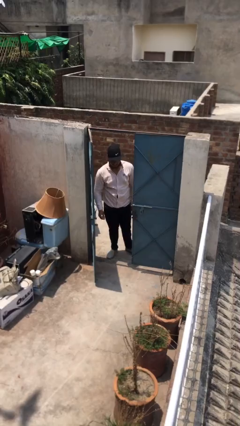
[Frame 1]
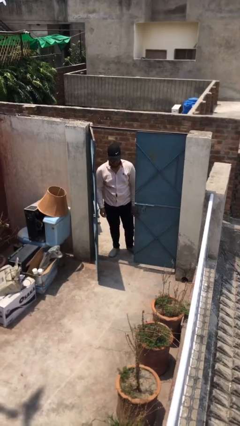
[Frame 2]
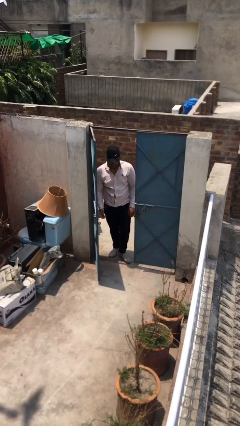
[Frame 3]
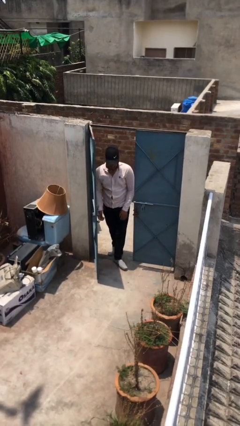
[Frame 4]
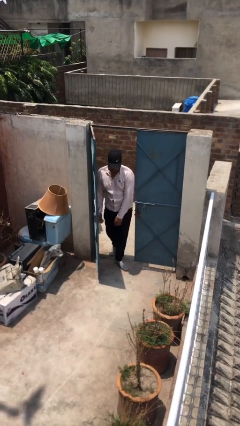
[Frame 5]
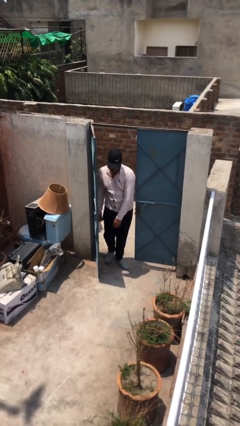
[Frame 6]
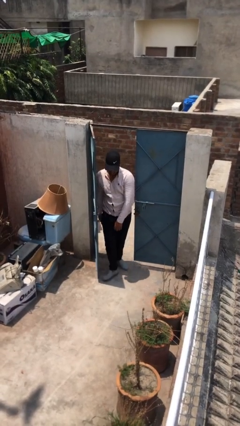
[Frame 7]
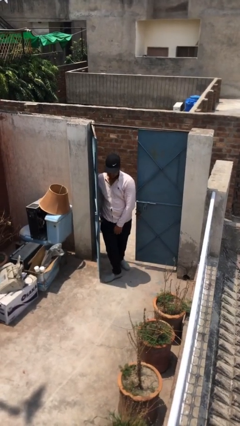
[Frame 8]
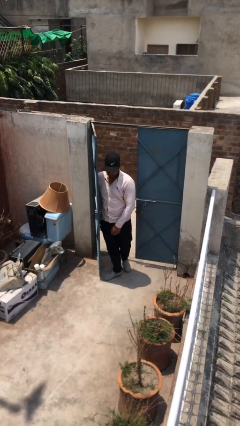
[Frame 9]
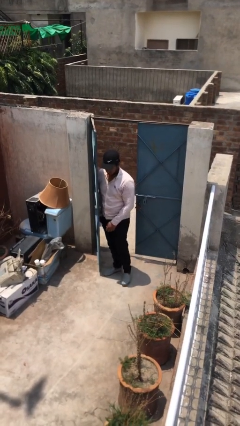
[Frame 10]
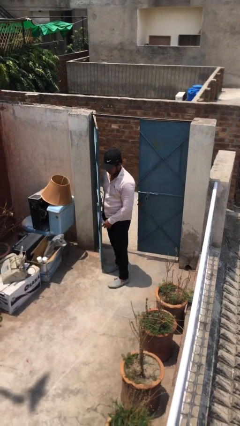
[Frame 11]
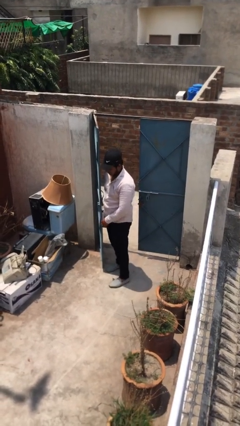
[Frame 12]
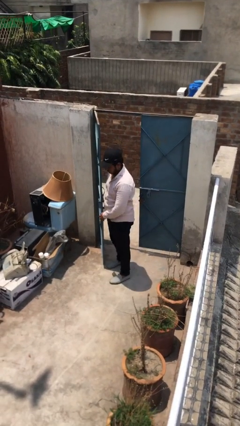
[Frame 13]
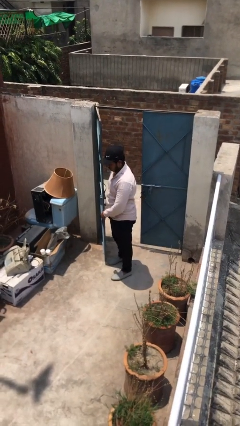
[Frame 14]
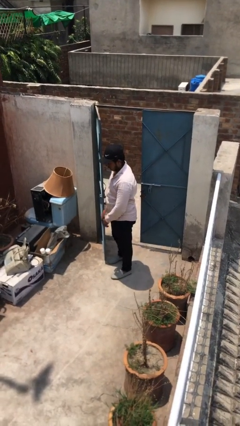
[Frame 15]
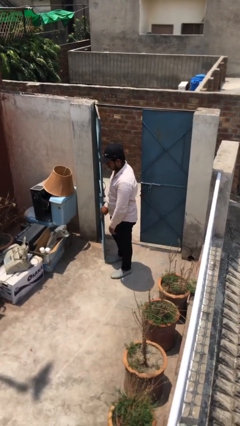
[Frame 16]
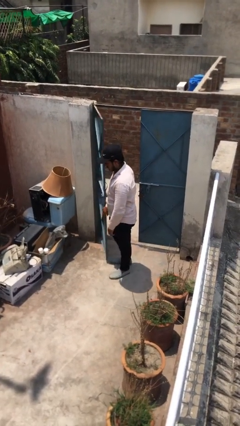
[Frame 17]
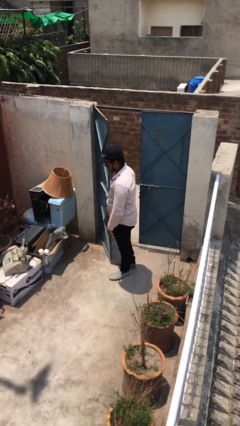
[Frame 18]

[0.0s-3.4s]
person enters scene through structure

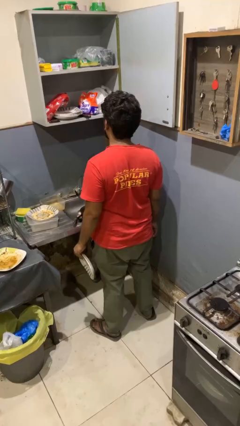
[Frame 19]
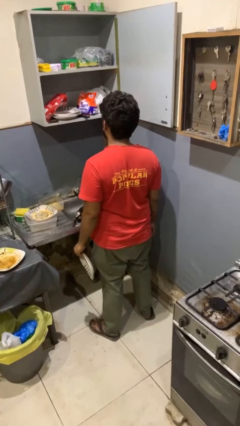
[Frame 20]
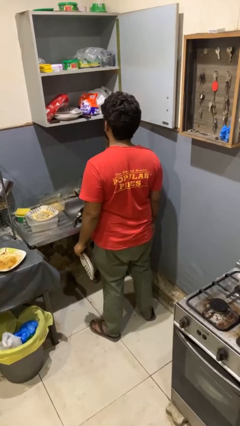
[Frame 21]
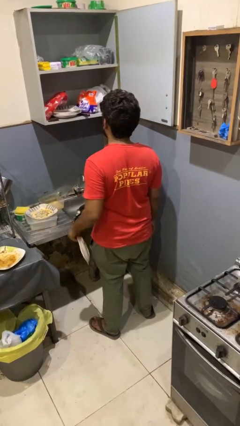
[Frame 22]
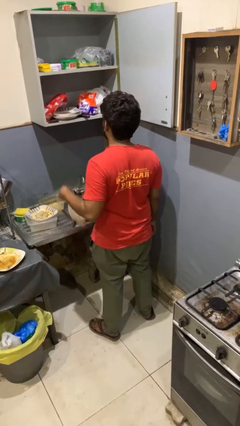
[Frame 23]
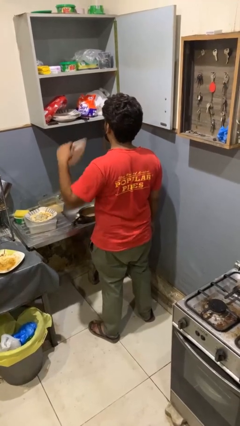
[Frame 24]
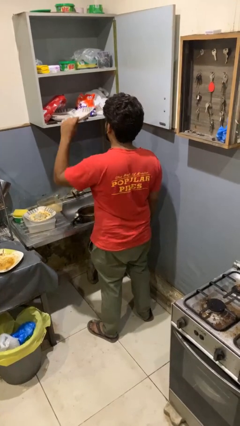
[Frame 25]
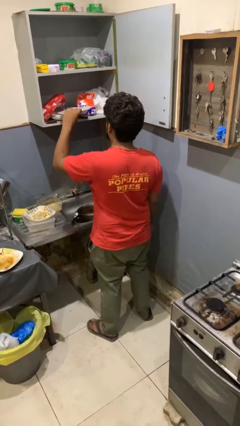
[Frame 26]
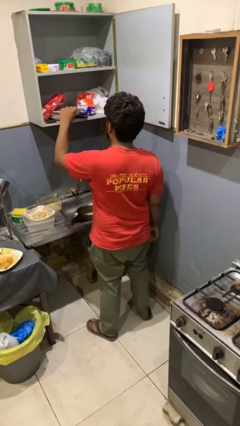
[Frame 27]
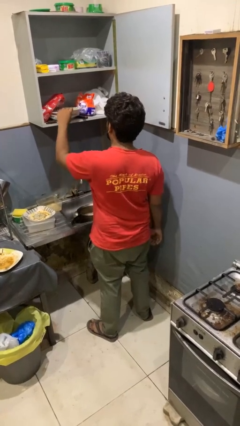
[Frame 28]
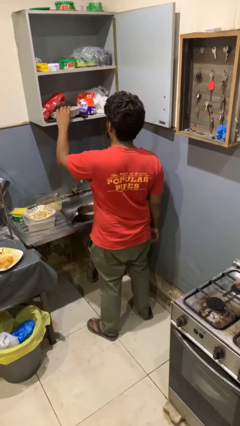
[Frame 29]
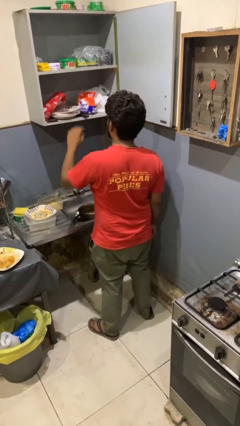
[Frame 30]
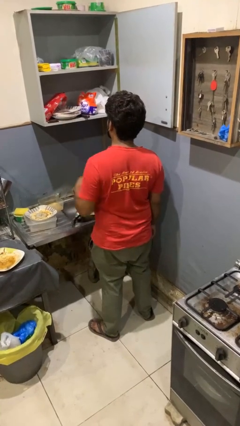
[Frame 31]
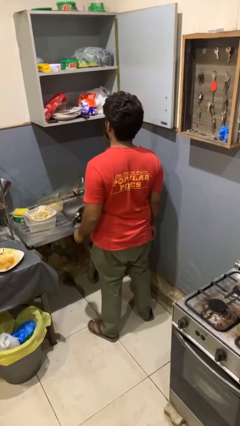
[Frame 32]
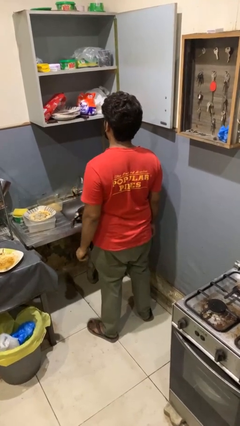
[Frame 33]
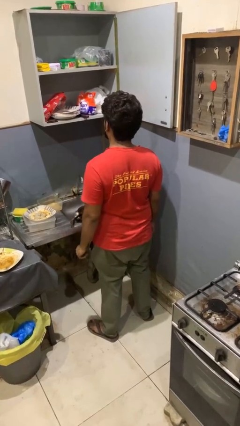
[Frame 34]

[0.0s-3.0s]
person puts object in cabinet

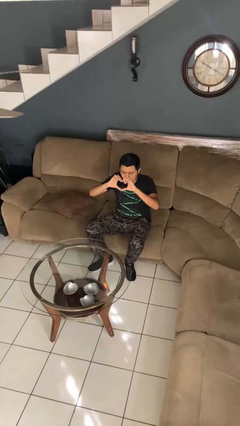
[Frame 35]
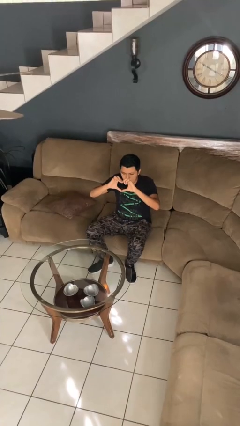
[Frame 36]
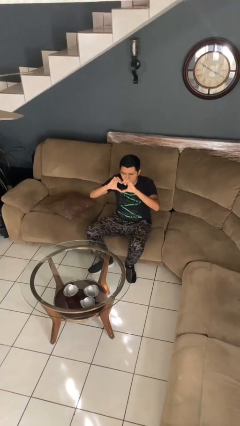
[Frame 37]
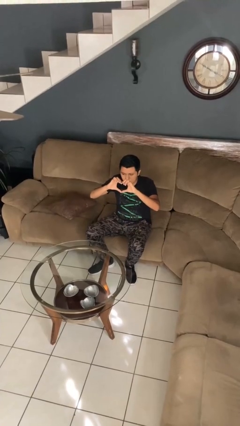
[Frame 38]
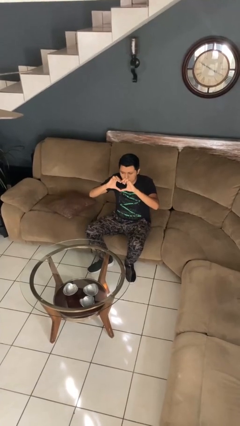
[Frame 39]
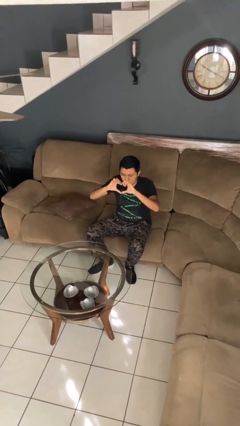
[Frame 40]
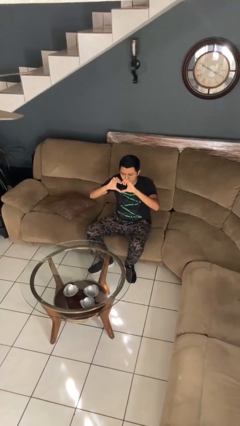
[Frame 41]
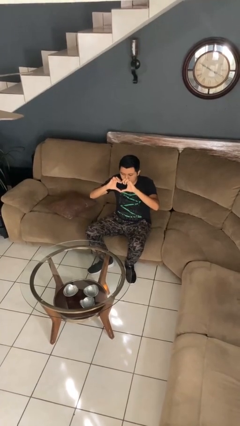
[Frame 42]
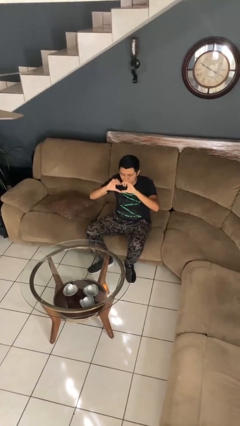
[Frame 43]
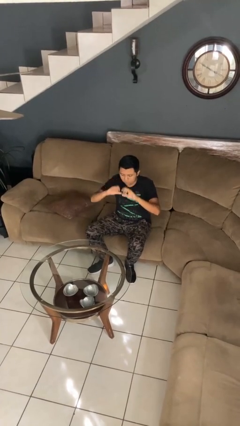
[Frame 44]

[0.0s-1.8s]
person gestures heart

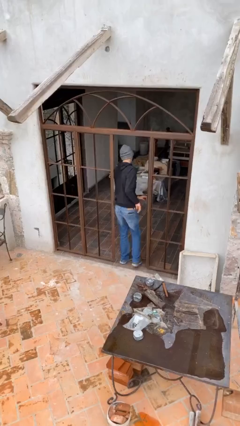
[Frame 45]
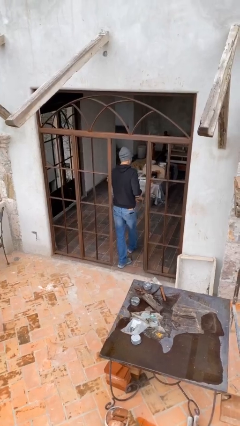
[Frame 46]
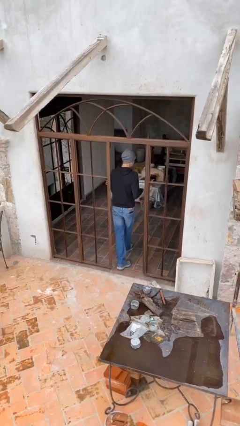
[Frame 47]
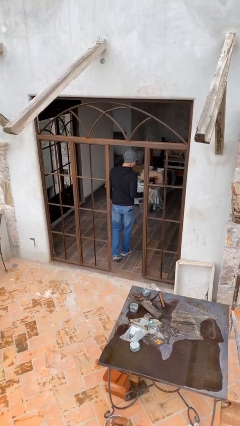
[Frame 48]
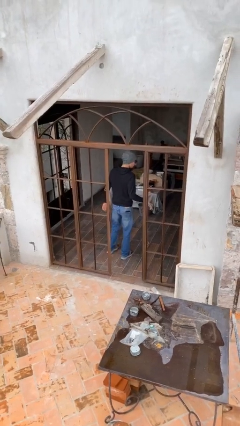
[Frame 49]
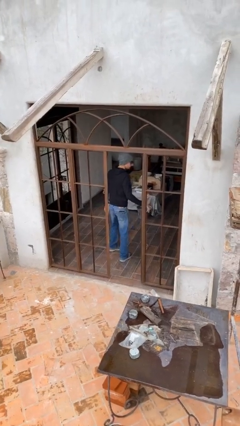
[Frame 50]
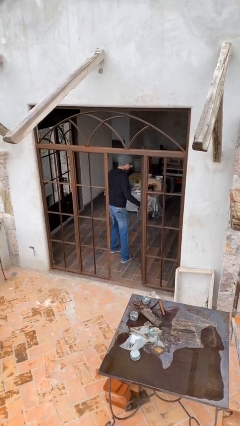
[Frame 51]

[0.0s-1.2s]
person exits scene through structure

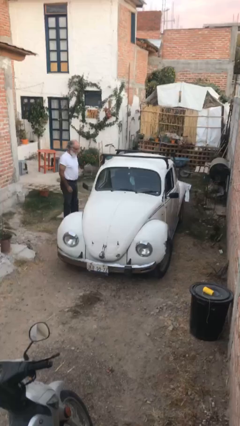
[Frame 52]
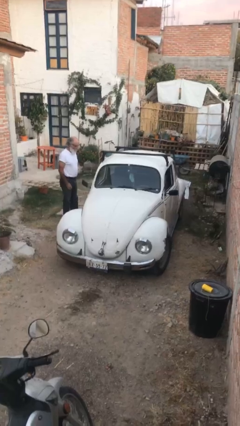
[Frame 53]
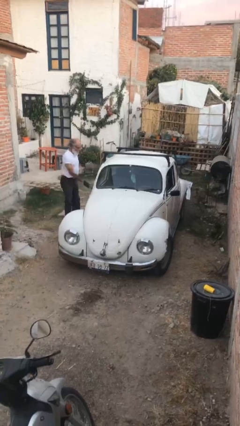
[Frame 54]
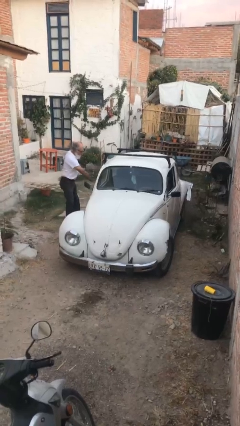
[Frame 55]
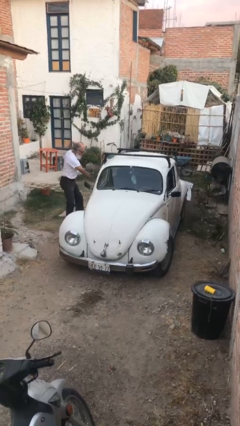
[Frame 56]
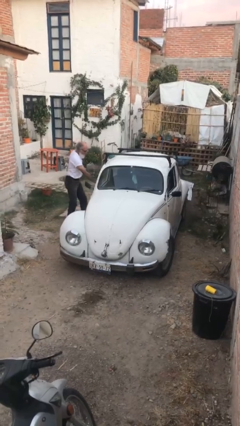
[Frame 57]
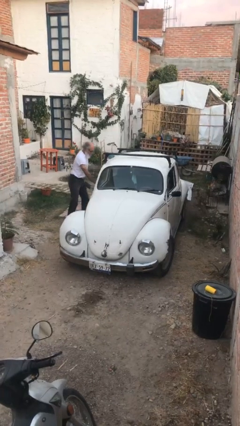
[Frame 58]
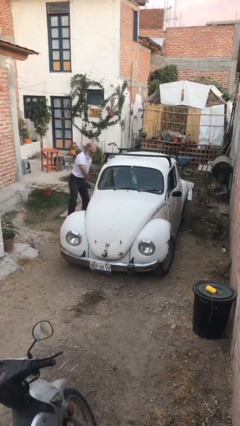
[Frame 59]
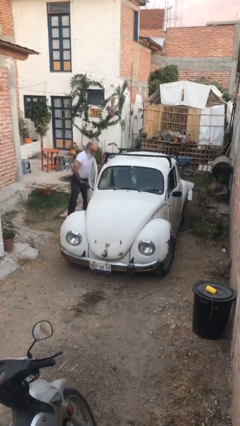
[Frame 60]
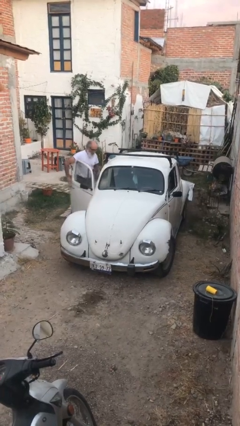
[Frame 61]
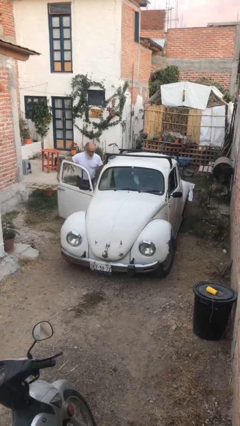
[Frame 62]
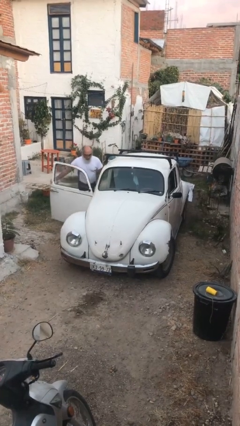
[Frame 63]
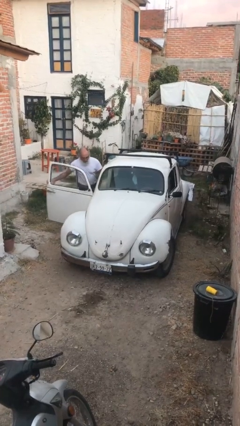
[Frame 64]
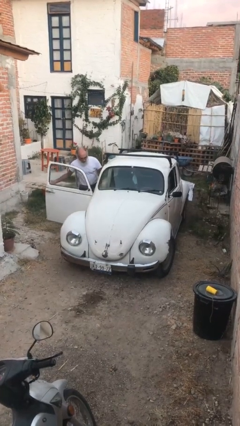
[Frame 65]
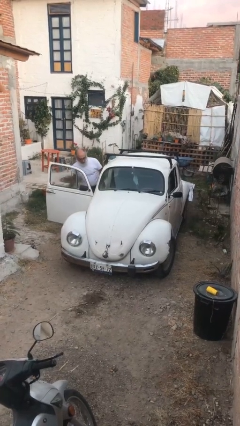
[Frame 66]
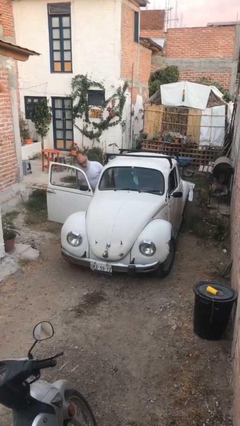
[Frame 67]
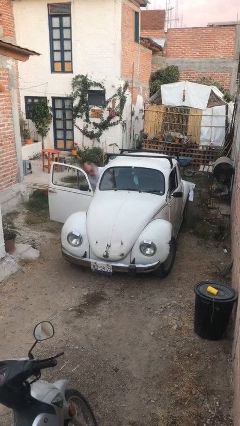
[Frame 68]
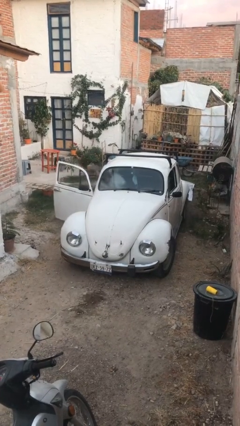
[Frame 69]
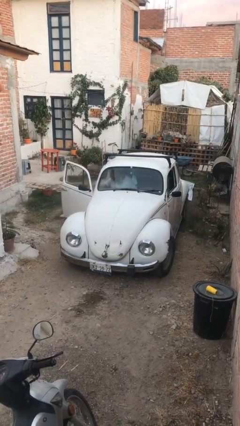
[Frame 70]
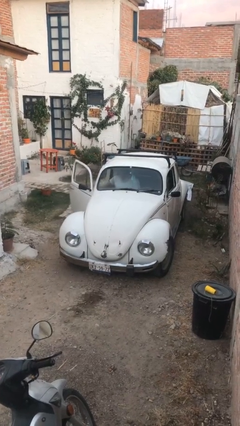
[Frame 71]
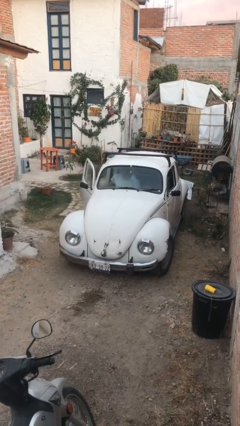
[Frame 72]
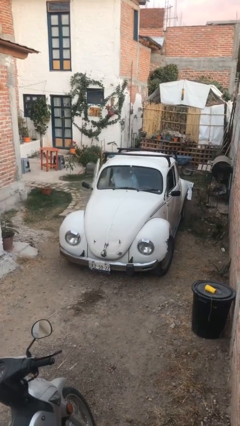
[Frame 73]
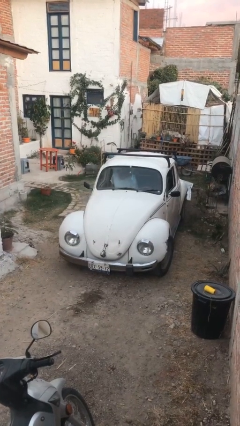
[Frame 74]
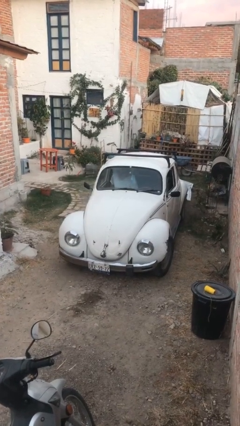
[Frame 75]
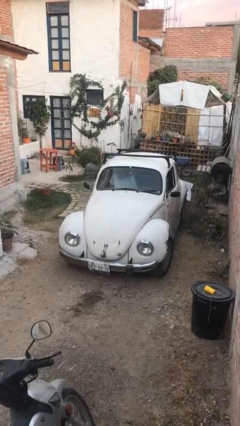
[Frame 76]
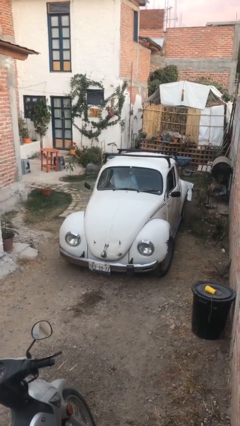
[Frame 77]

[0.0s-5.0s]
car picks up person

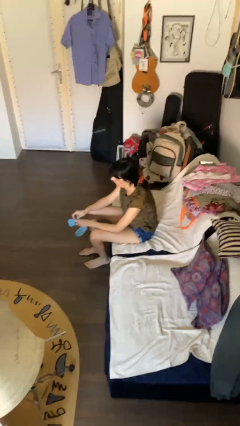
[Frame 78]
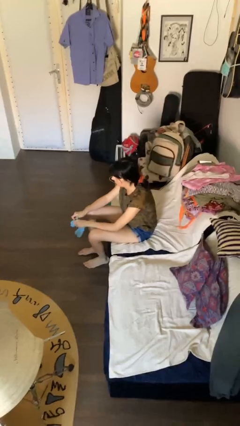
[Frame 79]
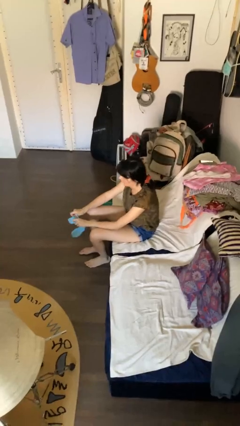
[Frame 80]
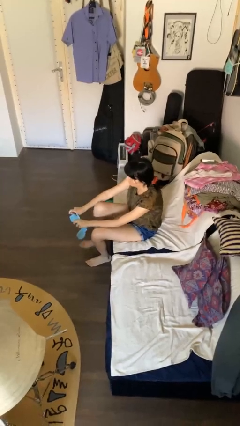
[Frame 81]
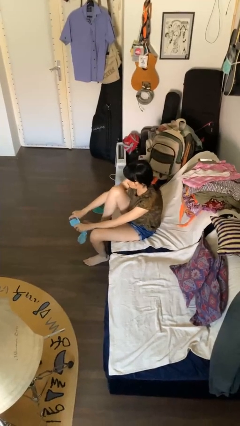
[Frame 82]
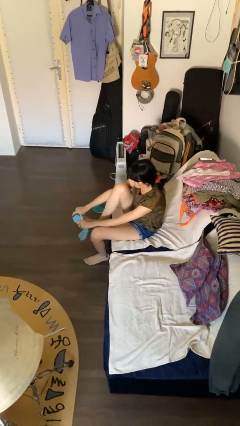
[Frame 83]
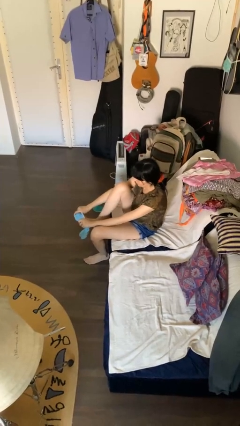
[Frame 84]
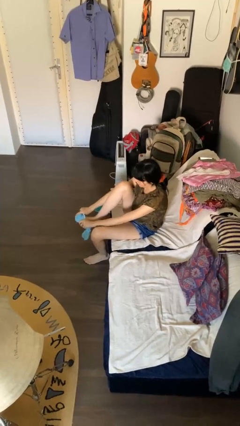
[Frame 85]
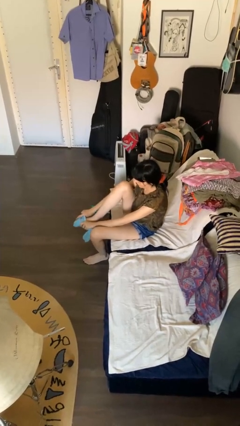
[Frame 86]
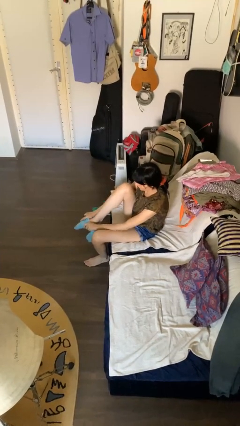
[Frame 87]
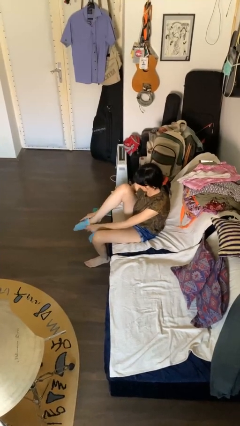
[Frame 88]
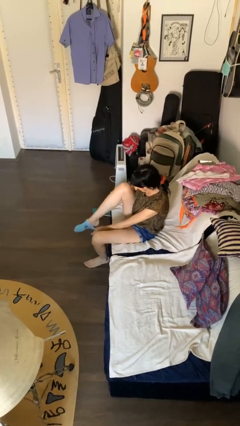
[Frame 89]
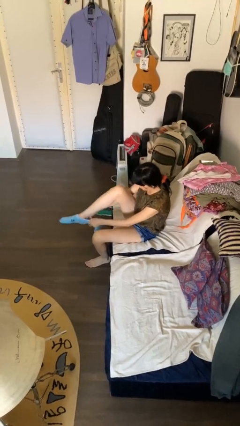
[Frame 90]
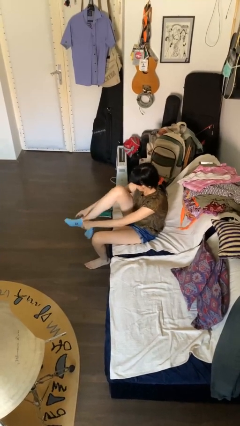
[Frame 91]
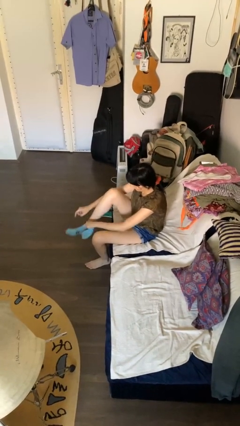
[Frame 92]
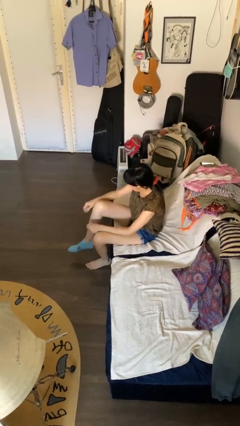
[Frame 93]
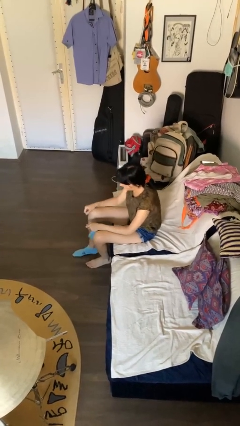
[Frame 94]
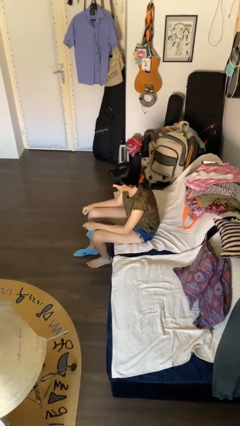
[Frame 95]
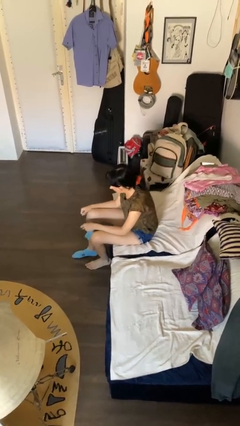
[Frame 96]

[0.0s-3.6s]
person puts on socks
